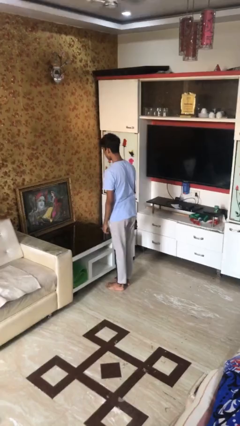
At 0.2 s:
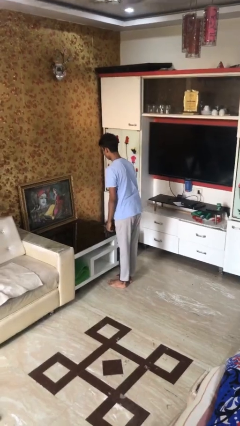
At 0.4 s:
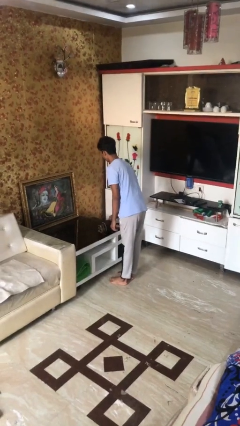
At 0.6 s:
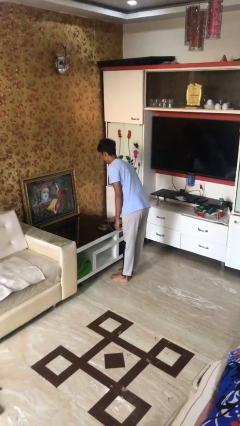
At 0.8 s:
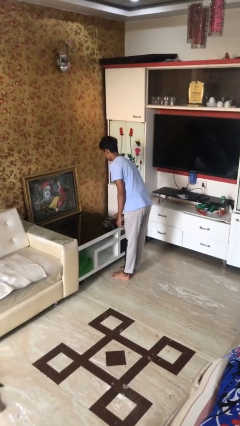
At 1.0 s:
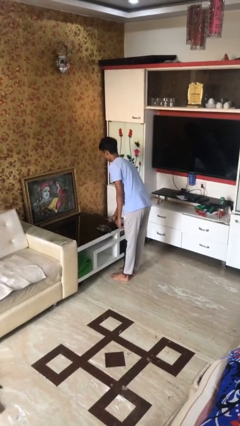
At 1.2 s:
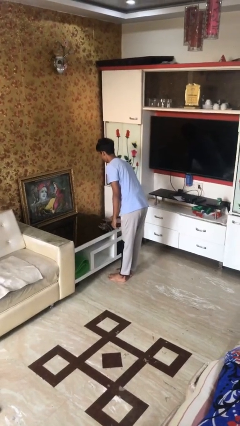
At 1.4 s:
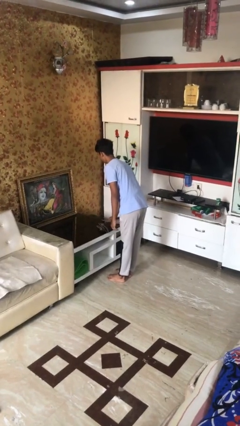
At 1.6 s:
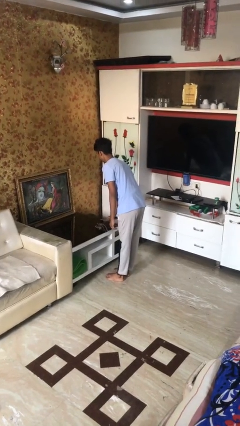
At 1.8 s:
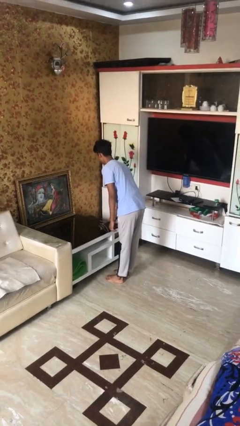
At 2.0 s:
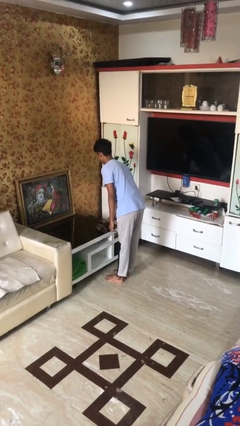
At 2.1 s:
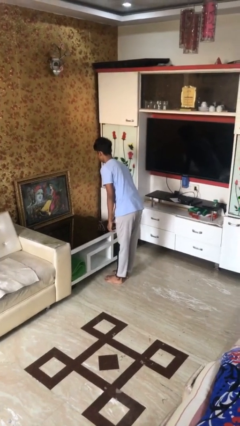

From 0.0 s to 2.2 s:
person cleans table with rag

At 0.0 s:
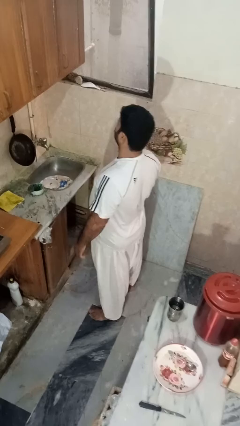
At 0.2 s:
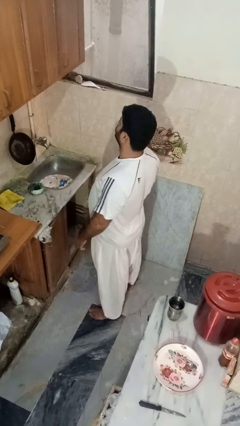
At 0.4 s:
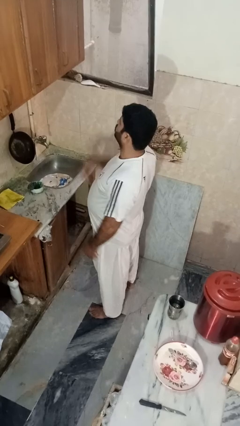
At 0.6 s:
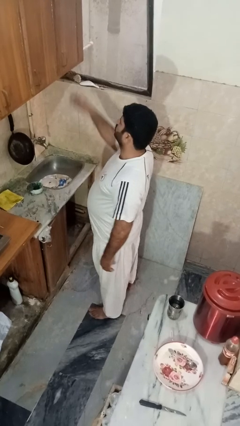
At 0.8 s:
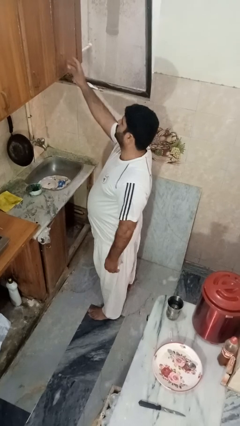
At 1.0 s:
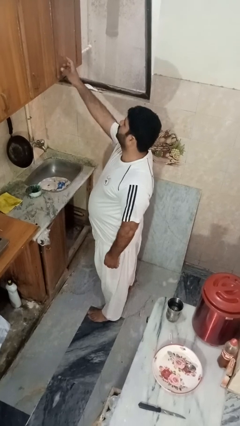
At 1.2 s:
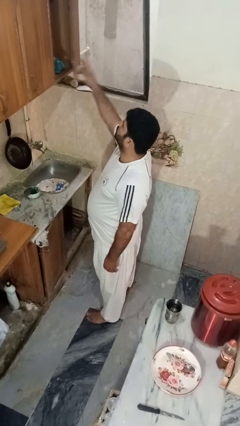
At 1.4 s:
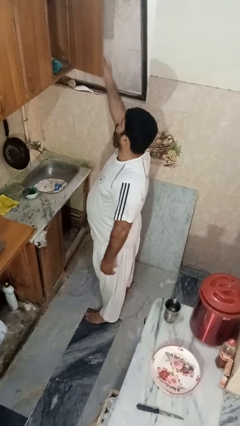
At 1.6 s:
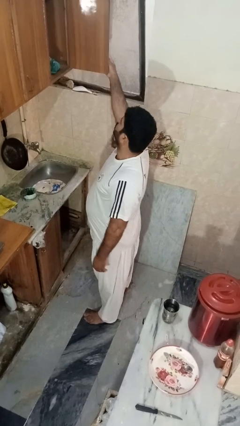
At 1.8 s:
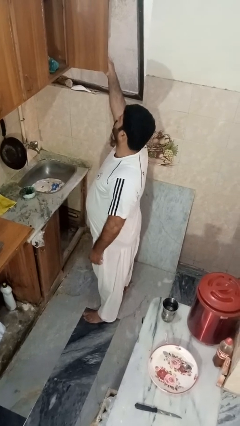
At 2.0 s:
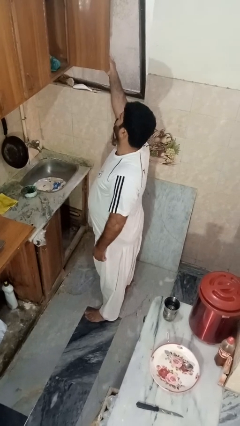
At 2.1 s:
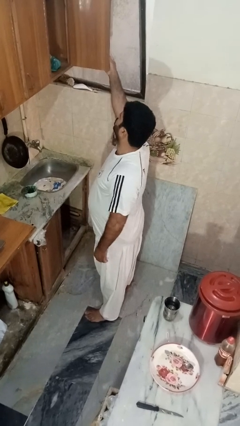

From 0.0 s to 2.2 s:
person opens cabinet

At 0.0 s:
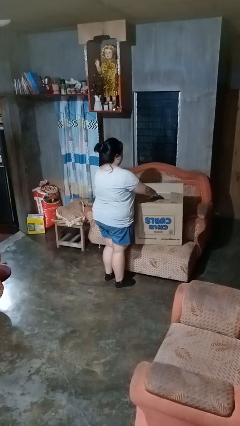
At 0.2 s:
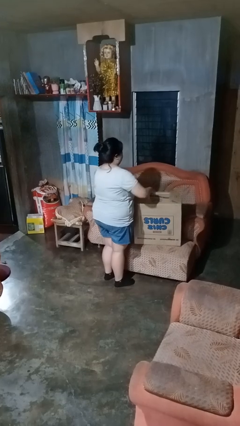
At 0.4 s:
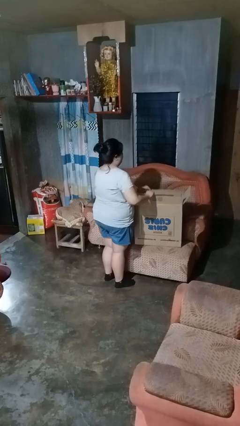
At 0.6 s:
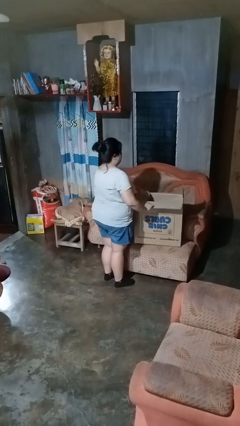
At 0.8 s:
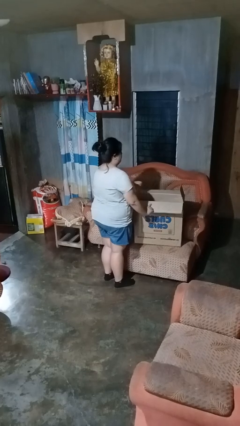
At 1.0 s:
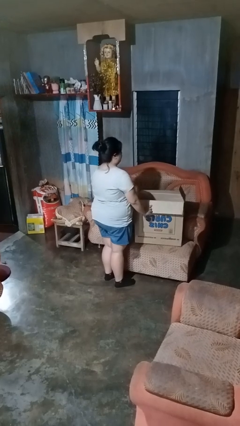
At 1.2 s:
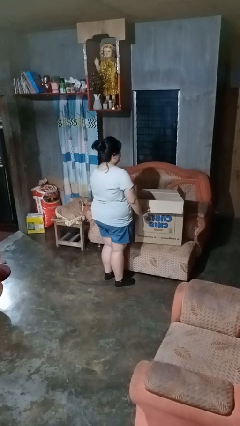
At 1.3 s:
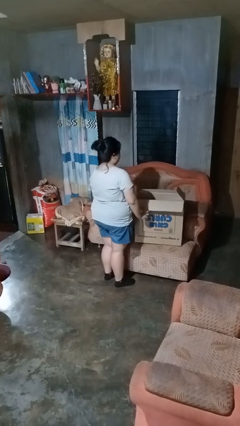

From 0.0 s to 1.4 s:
person opens box

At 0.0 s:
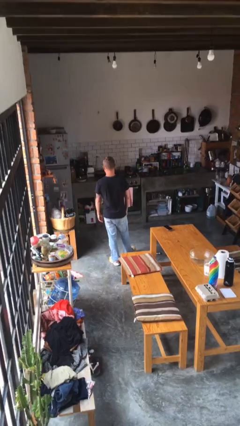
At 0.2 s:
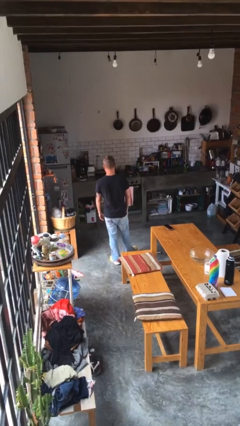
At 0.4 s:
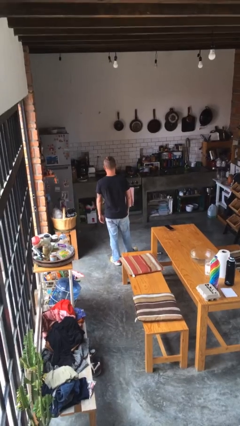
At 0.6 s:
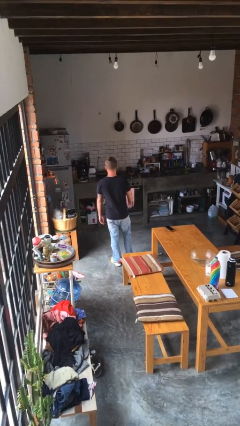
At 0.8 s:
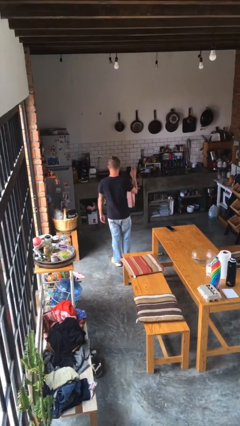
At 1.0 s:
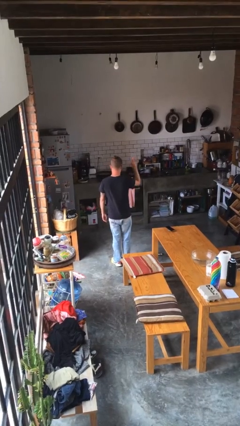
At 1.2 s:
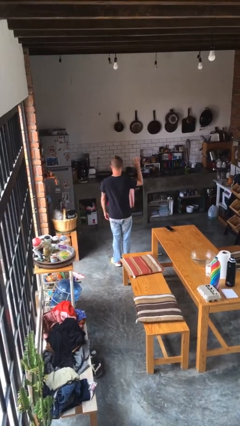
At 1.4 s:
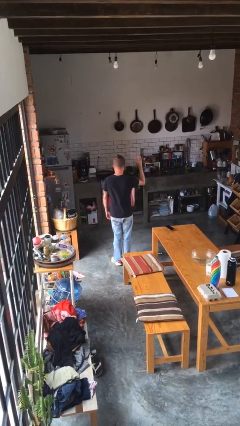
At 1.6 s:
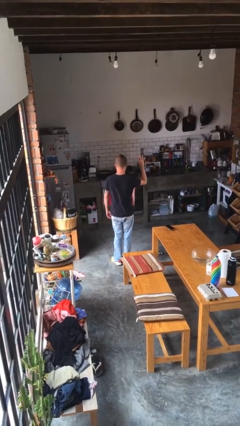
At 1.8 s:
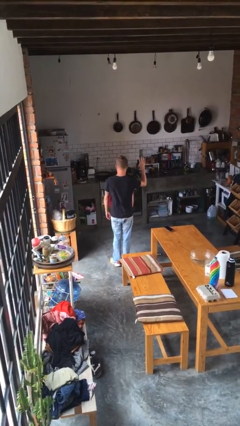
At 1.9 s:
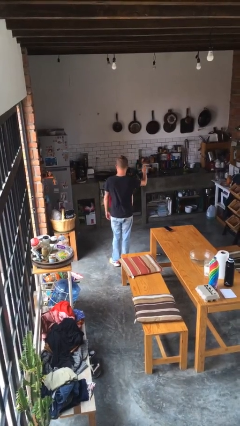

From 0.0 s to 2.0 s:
person gestures number four

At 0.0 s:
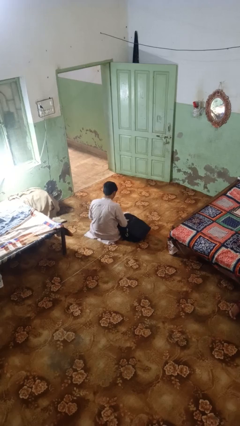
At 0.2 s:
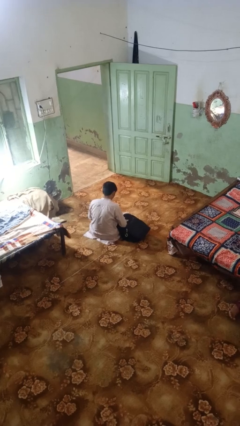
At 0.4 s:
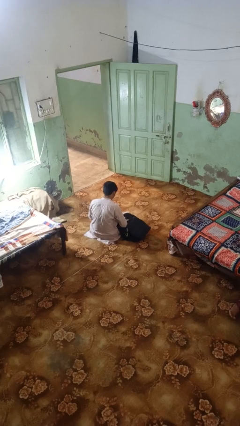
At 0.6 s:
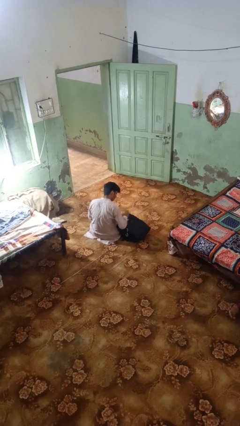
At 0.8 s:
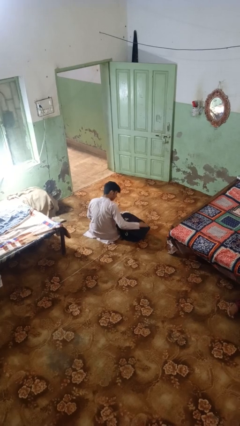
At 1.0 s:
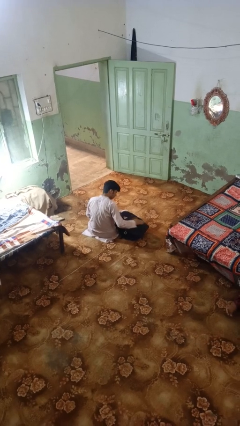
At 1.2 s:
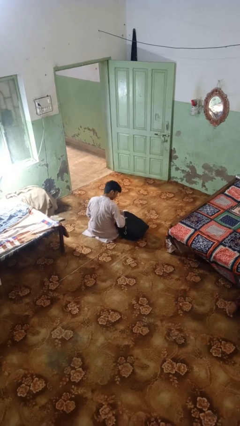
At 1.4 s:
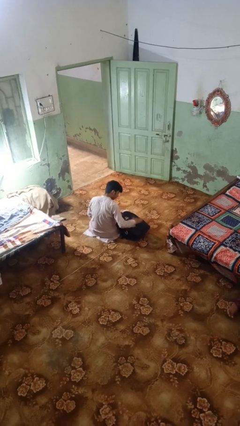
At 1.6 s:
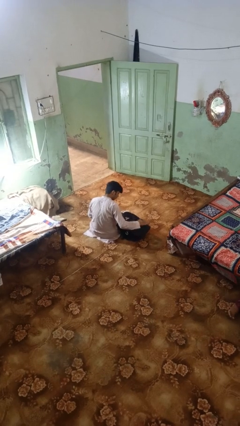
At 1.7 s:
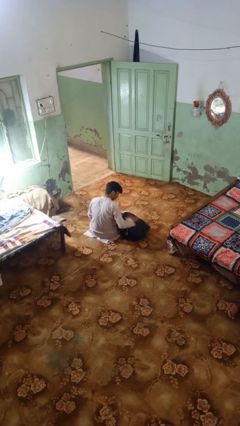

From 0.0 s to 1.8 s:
person waves hand over object

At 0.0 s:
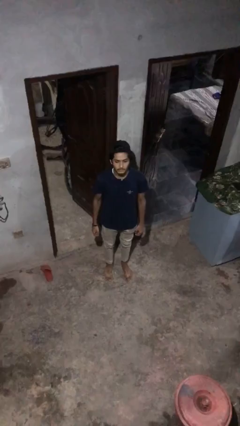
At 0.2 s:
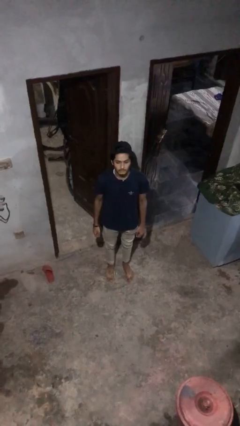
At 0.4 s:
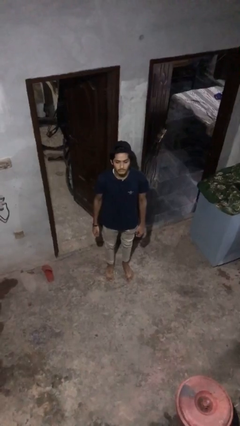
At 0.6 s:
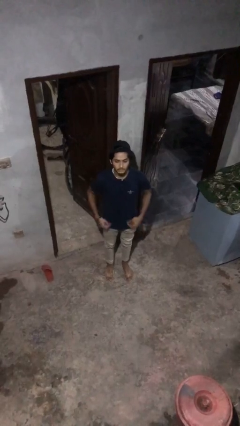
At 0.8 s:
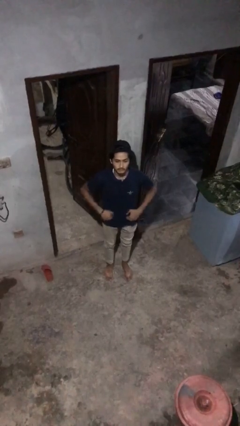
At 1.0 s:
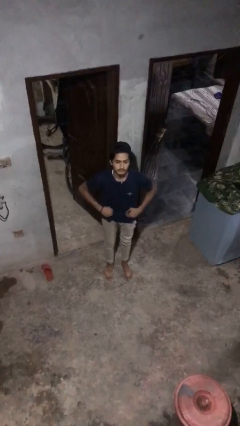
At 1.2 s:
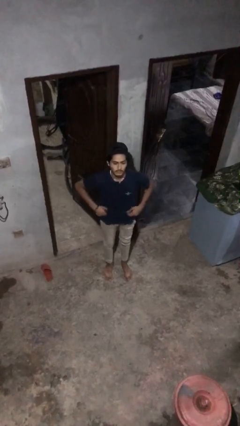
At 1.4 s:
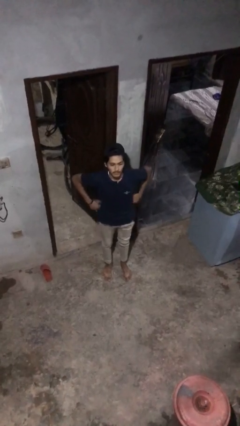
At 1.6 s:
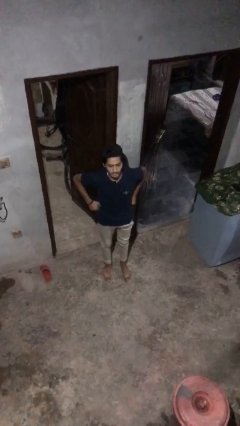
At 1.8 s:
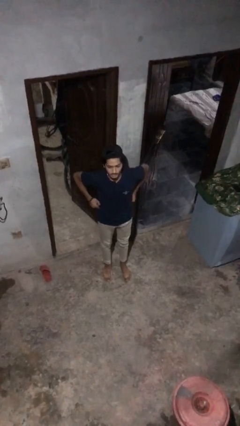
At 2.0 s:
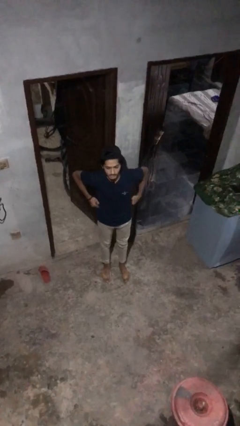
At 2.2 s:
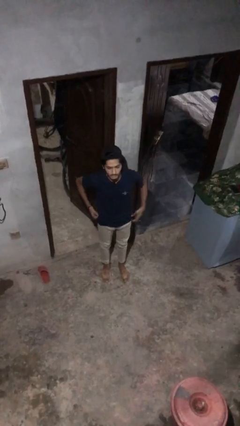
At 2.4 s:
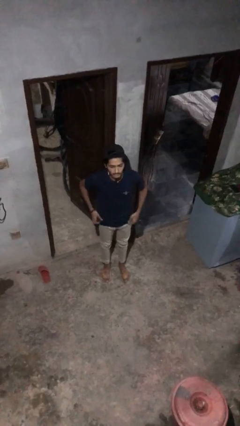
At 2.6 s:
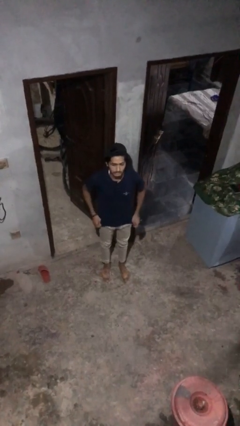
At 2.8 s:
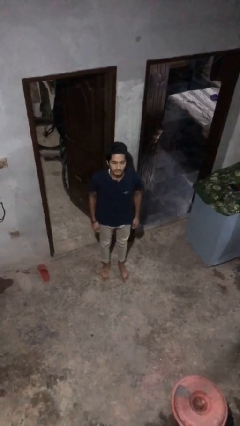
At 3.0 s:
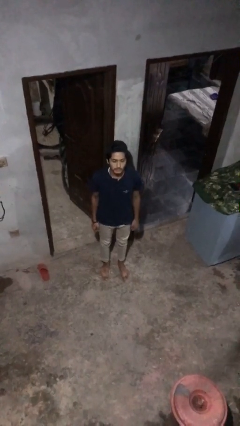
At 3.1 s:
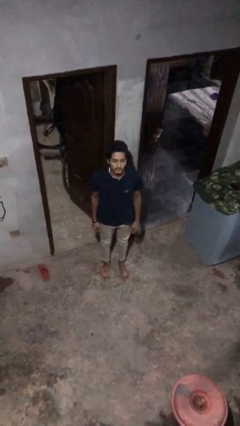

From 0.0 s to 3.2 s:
person hikes up pants

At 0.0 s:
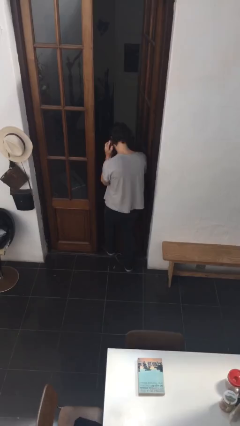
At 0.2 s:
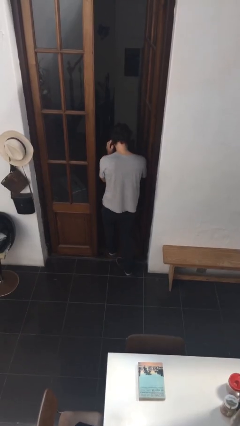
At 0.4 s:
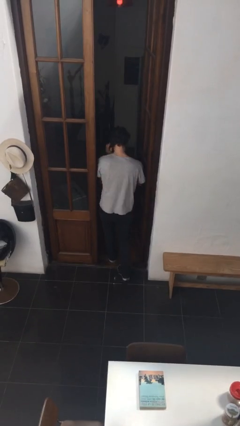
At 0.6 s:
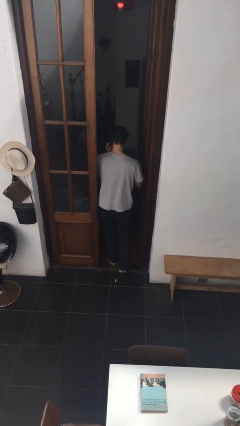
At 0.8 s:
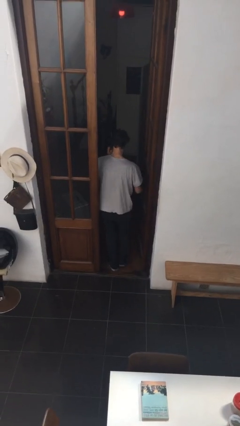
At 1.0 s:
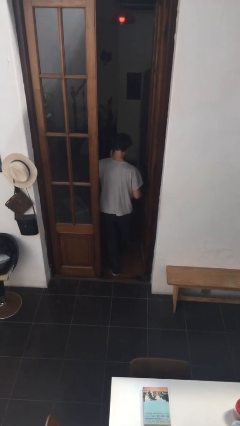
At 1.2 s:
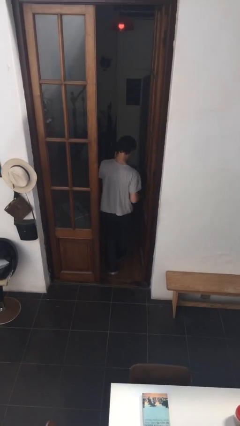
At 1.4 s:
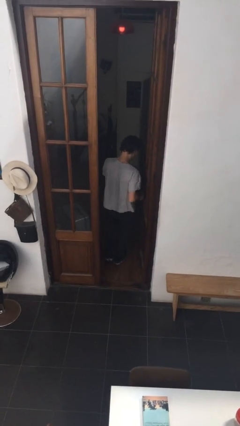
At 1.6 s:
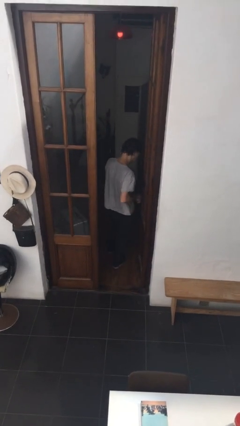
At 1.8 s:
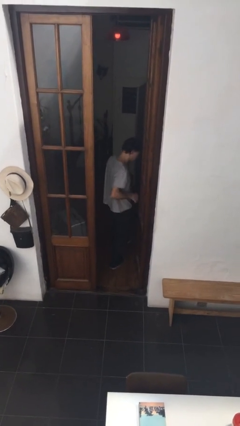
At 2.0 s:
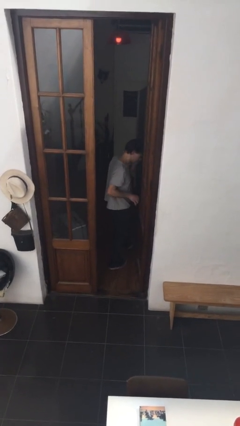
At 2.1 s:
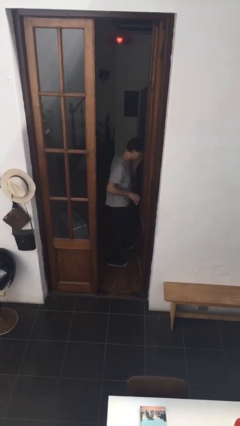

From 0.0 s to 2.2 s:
person exits scene through structure

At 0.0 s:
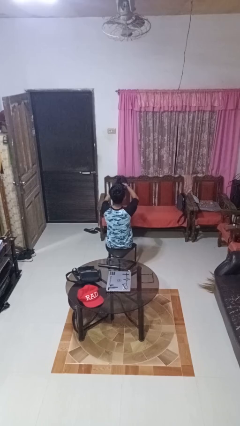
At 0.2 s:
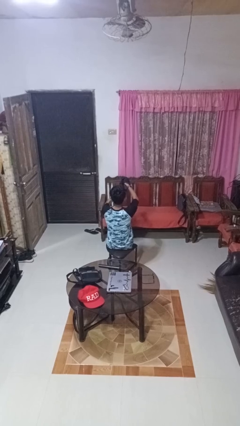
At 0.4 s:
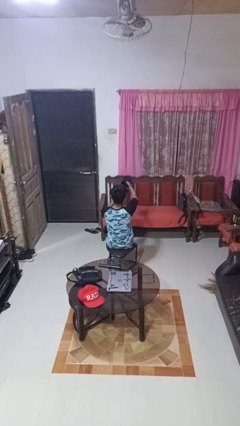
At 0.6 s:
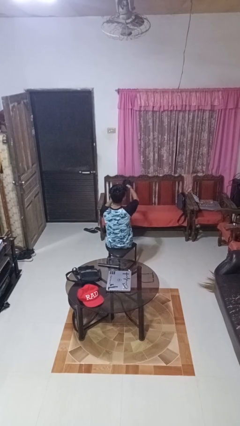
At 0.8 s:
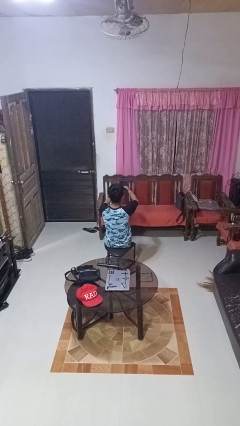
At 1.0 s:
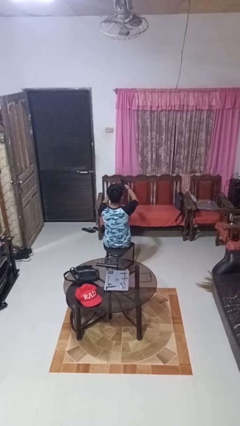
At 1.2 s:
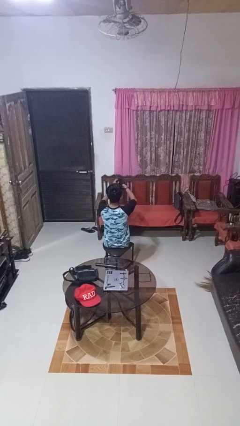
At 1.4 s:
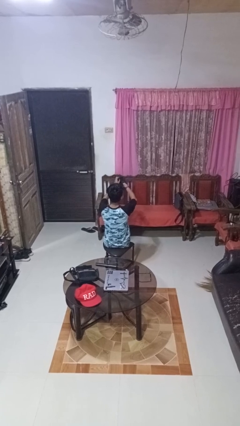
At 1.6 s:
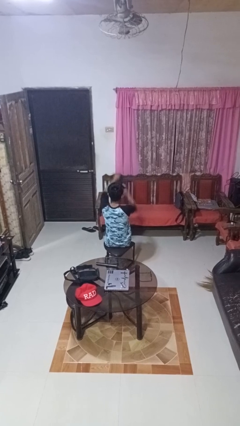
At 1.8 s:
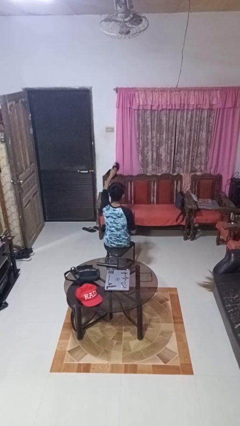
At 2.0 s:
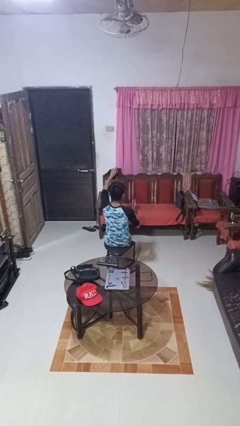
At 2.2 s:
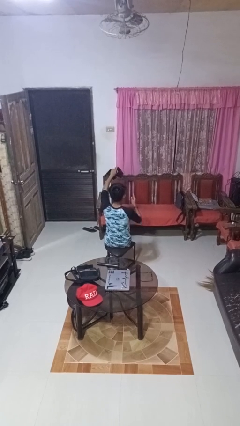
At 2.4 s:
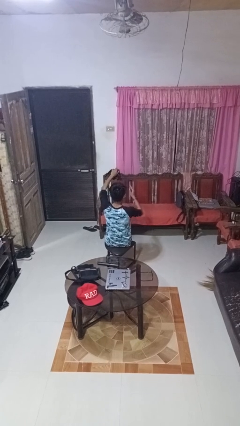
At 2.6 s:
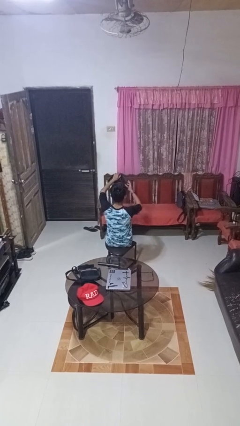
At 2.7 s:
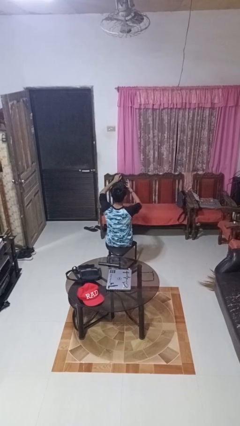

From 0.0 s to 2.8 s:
person takes off gloves
